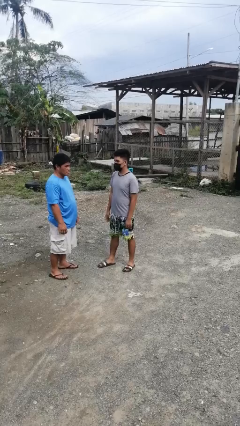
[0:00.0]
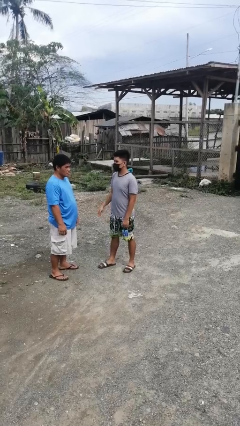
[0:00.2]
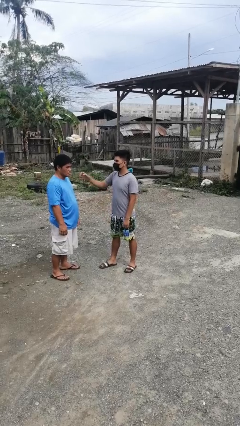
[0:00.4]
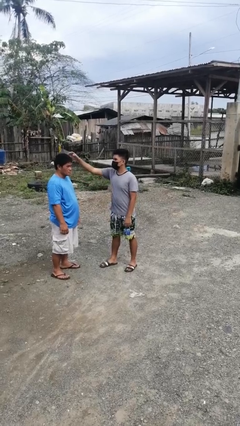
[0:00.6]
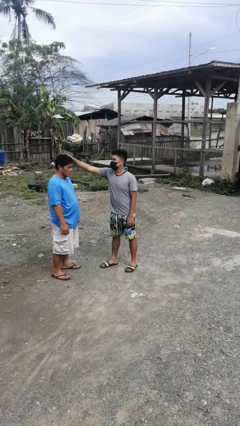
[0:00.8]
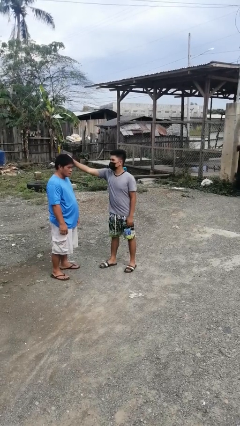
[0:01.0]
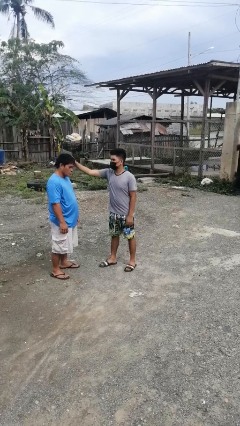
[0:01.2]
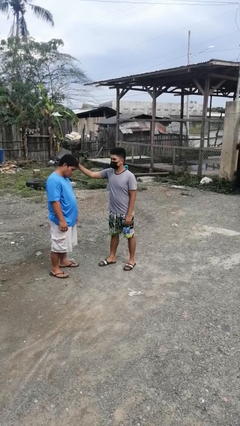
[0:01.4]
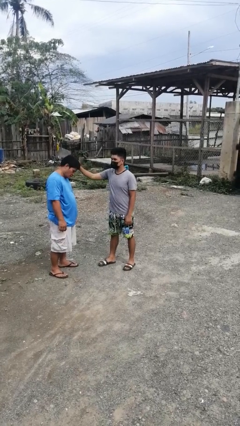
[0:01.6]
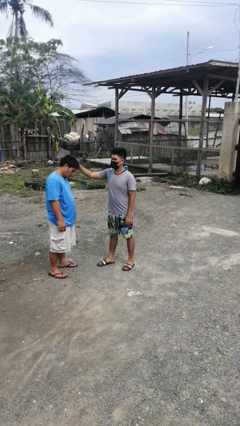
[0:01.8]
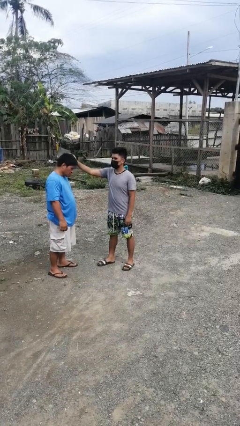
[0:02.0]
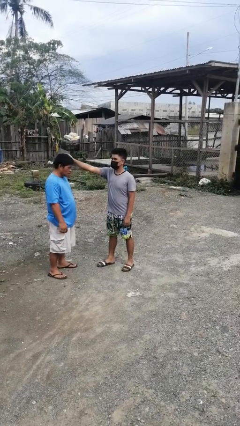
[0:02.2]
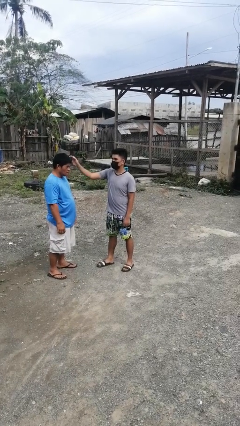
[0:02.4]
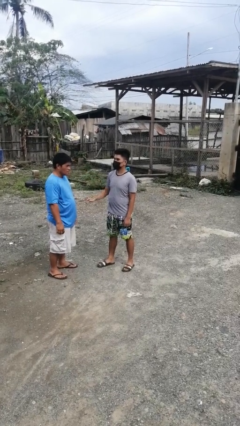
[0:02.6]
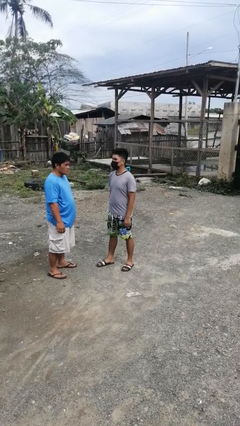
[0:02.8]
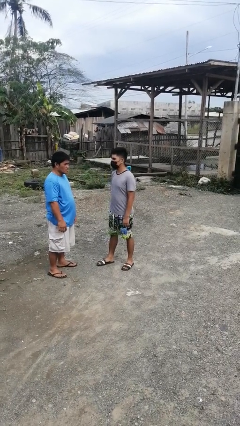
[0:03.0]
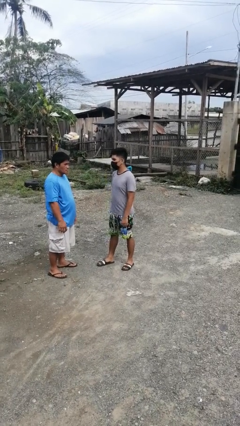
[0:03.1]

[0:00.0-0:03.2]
person grabs person by hair

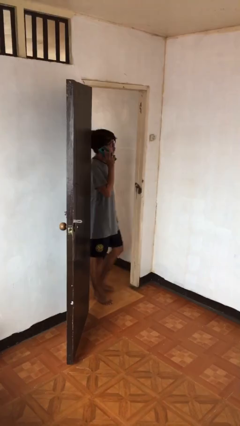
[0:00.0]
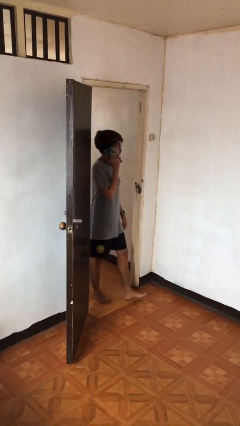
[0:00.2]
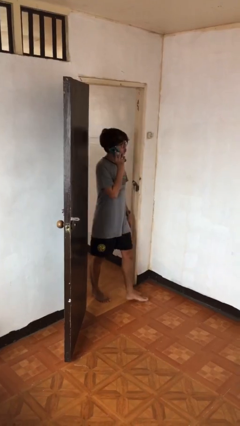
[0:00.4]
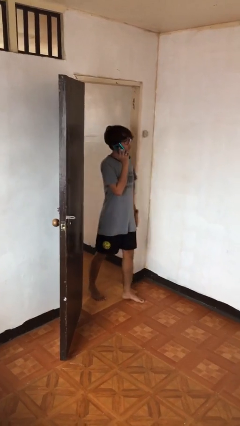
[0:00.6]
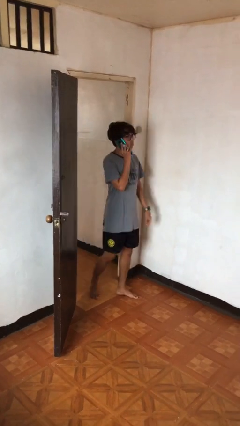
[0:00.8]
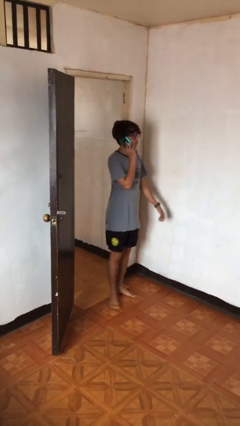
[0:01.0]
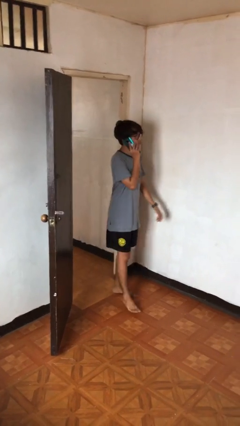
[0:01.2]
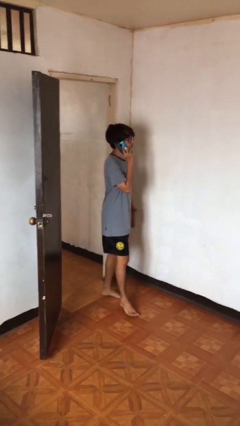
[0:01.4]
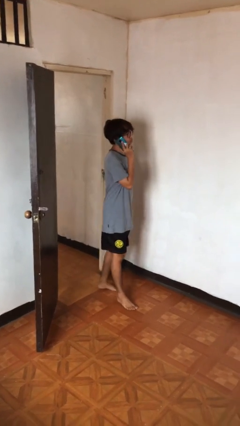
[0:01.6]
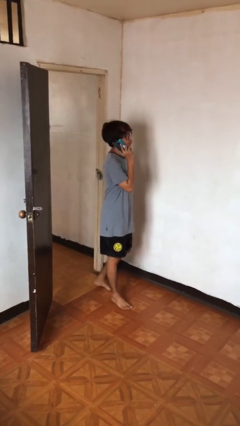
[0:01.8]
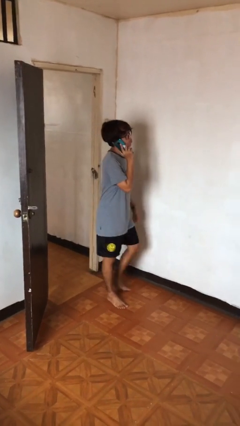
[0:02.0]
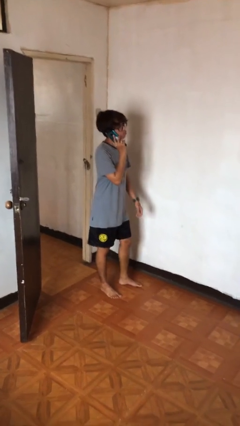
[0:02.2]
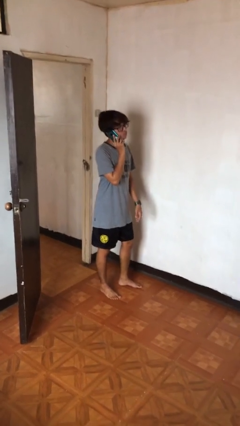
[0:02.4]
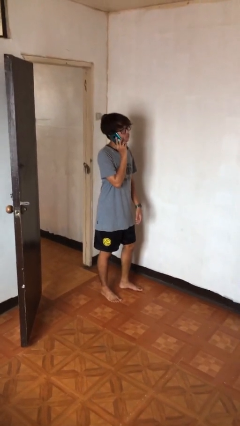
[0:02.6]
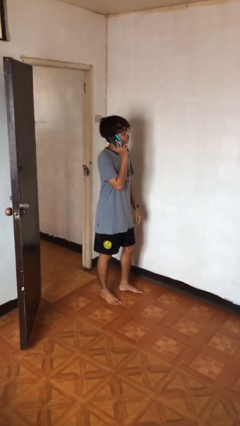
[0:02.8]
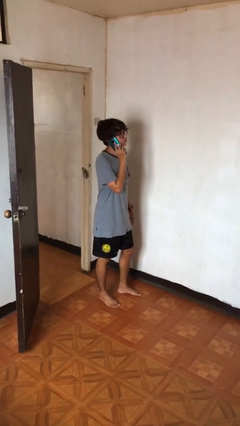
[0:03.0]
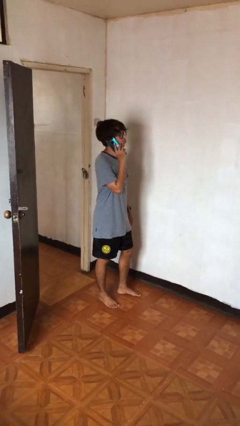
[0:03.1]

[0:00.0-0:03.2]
person enters scene through structure

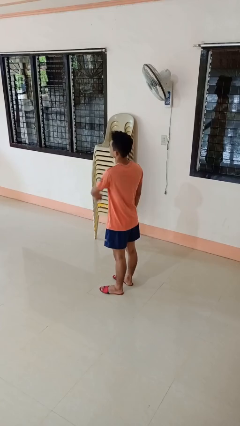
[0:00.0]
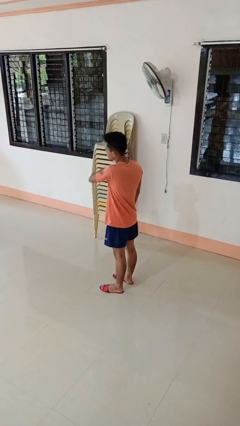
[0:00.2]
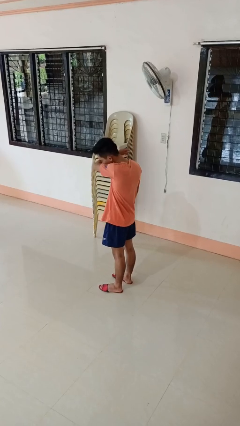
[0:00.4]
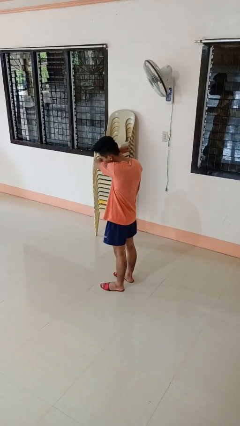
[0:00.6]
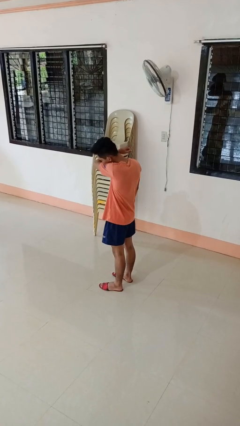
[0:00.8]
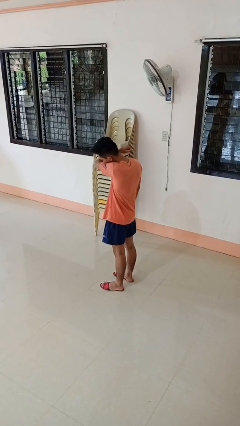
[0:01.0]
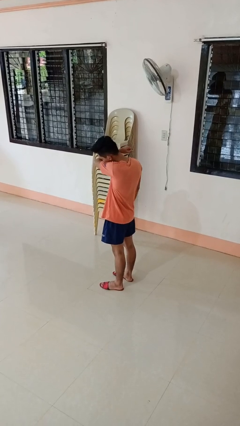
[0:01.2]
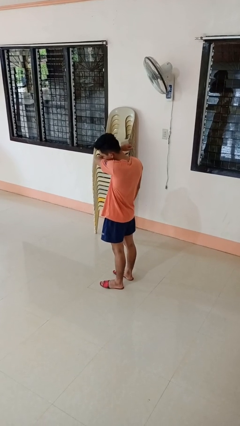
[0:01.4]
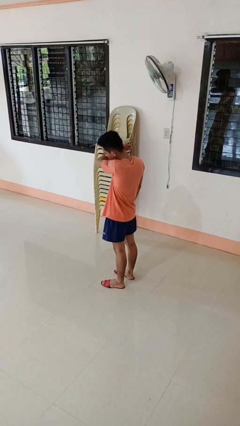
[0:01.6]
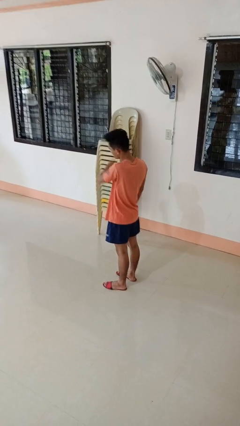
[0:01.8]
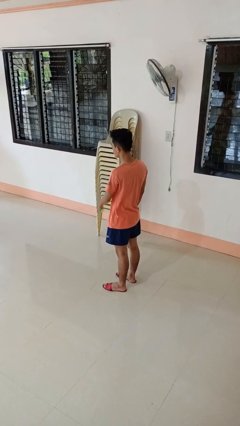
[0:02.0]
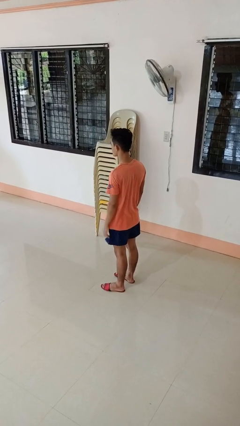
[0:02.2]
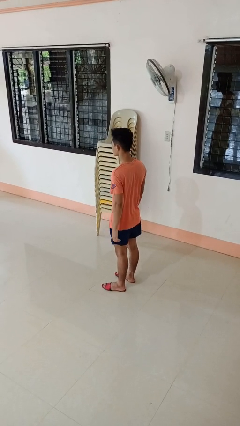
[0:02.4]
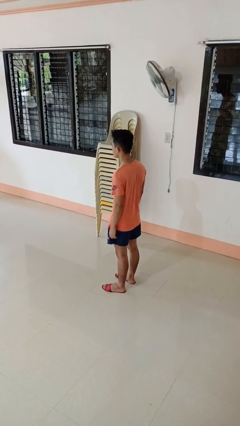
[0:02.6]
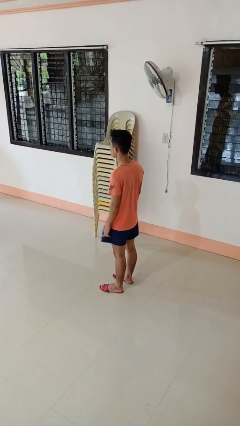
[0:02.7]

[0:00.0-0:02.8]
person sneezes into arm

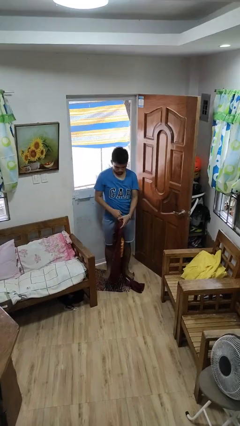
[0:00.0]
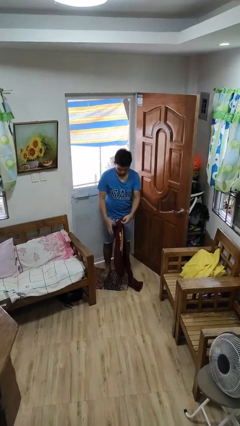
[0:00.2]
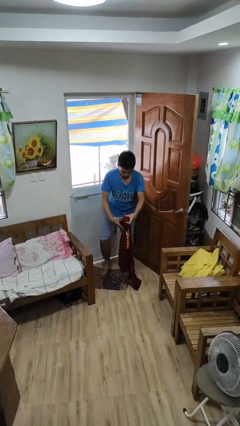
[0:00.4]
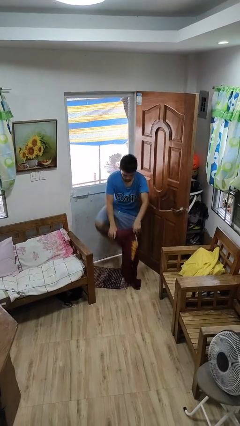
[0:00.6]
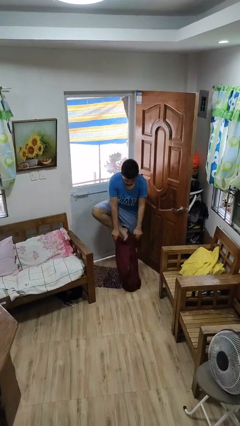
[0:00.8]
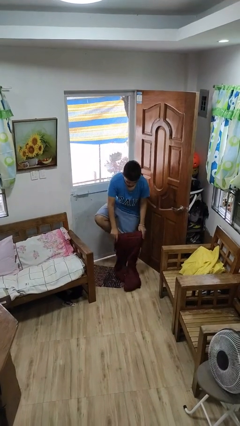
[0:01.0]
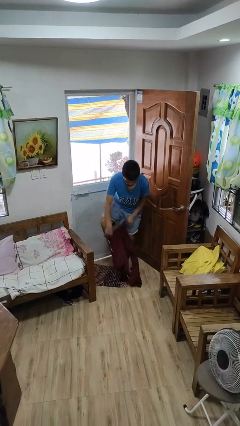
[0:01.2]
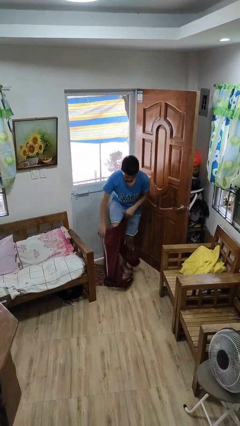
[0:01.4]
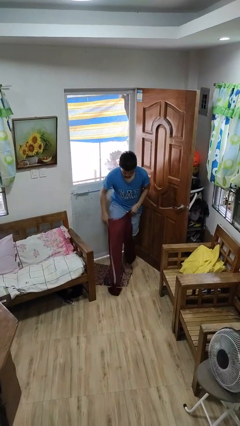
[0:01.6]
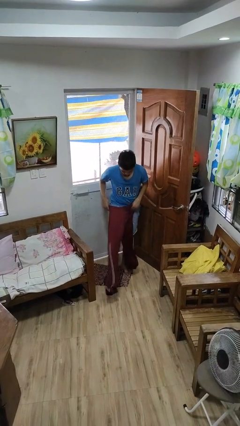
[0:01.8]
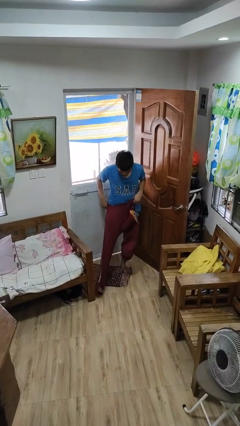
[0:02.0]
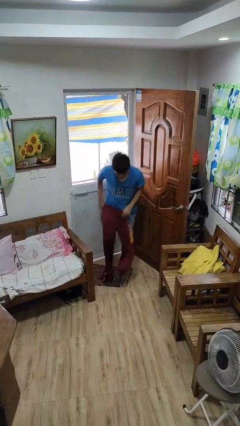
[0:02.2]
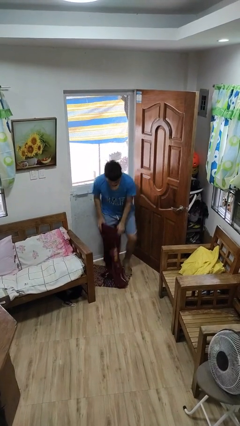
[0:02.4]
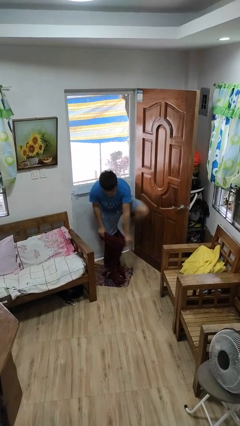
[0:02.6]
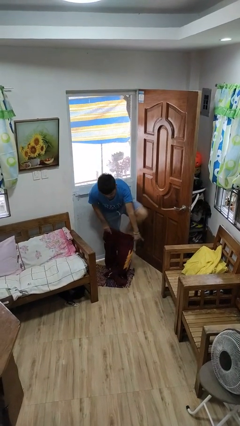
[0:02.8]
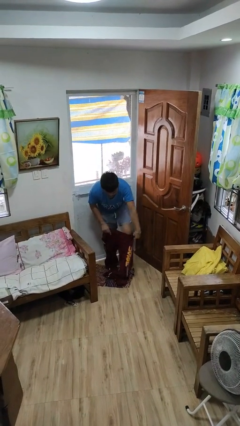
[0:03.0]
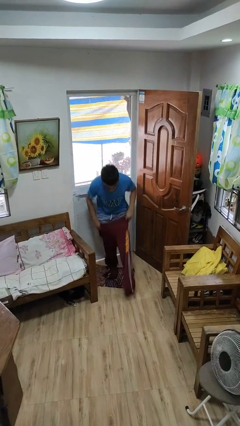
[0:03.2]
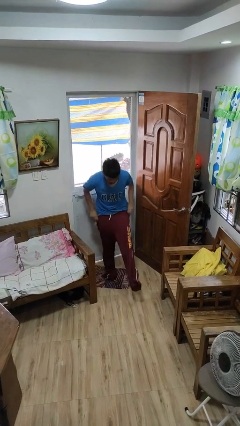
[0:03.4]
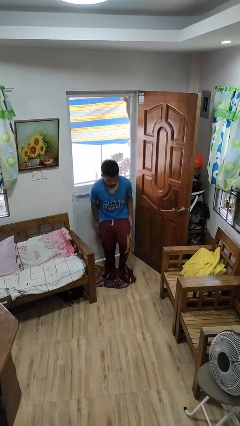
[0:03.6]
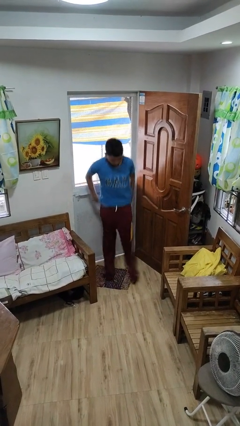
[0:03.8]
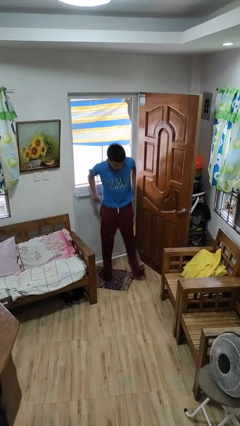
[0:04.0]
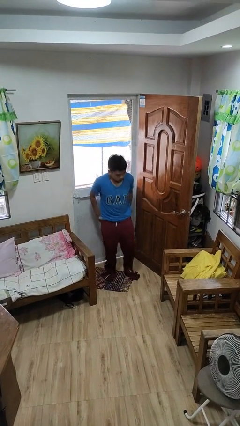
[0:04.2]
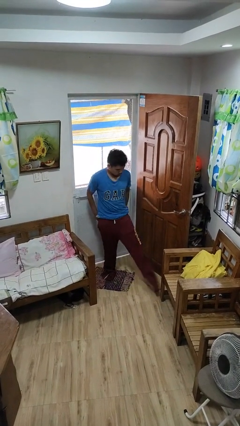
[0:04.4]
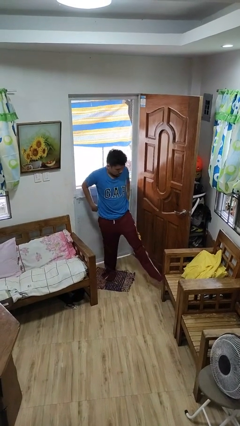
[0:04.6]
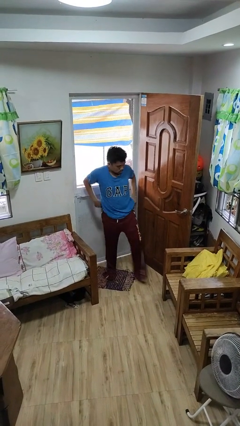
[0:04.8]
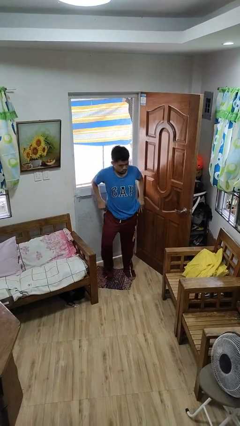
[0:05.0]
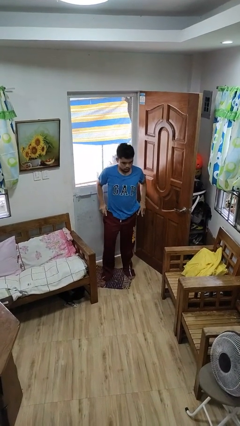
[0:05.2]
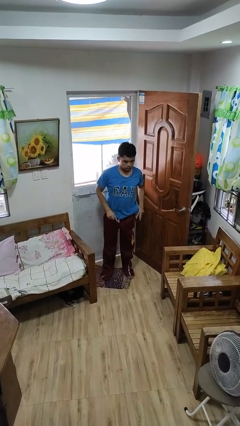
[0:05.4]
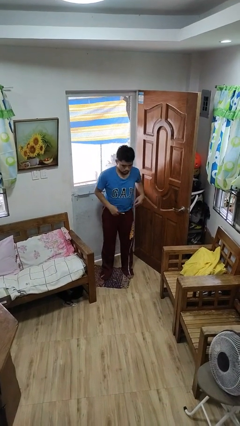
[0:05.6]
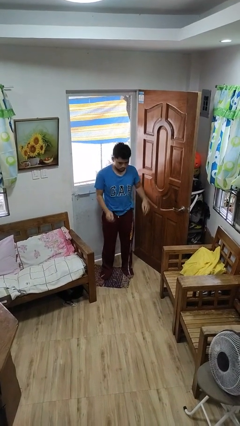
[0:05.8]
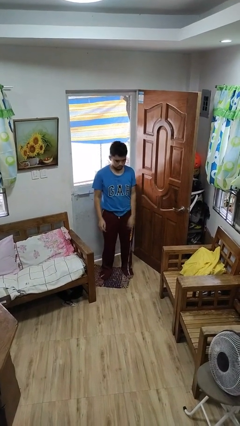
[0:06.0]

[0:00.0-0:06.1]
person puts on pants

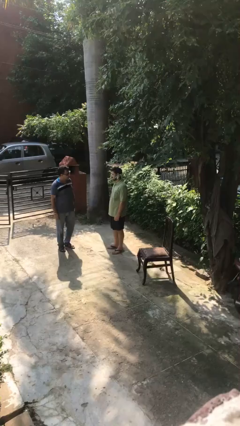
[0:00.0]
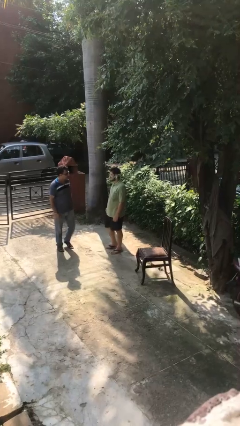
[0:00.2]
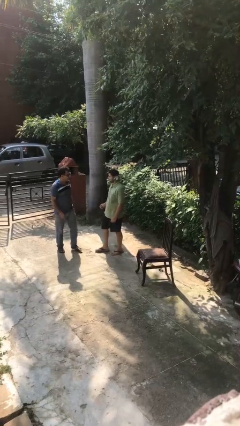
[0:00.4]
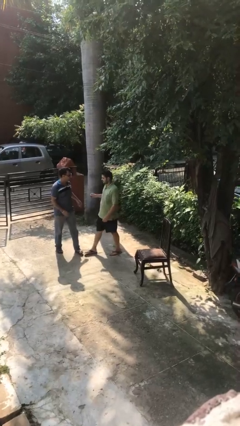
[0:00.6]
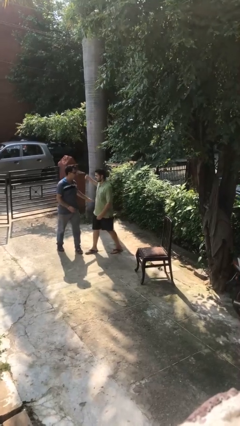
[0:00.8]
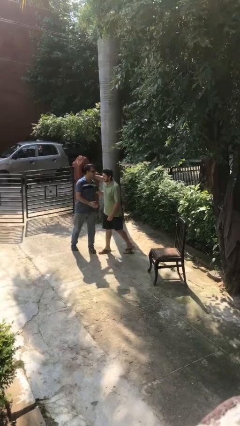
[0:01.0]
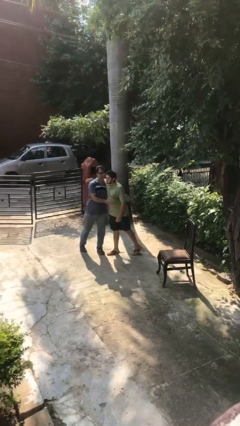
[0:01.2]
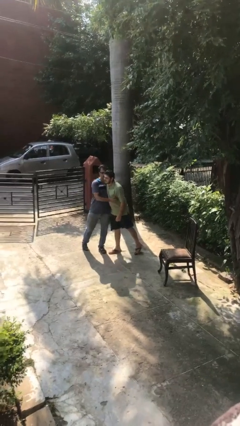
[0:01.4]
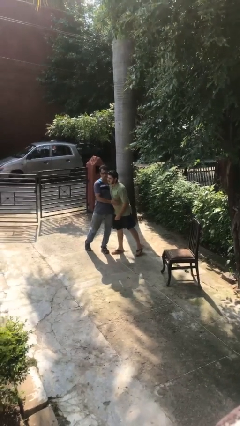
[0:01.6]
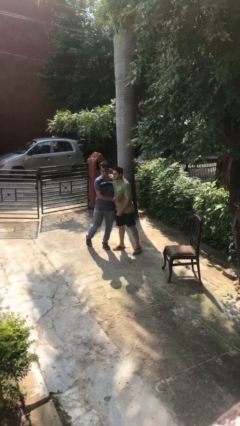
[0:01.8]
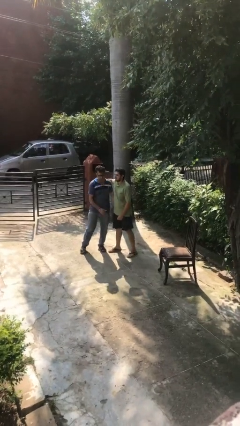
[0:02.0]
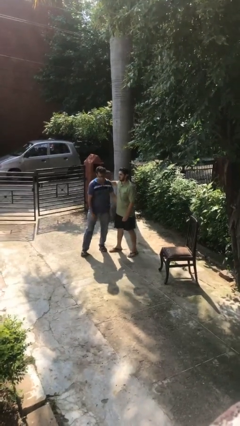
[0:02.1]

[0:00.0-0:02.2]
person embraces person

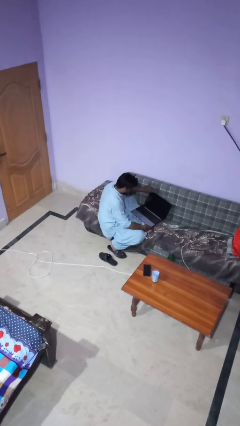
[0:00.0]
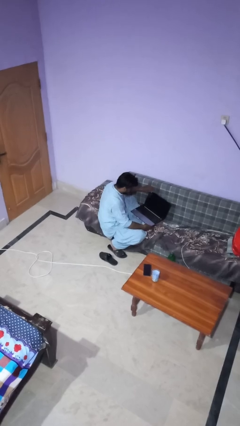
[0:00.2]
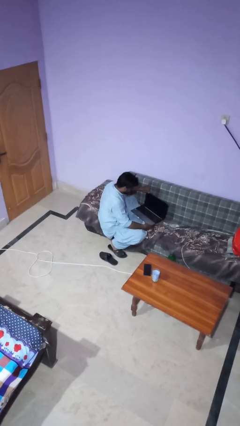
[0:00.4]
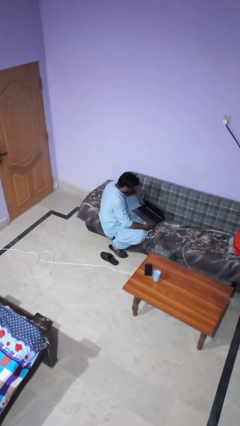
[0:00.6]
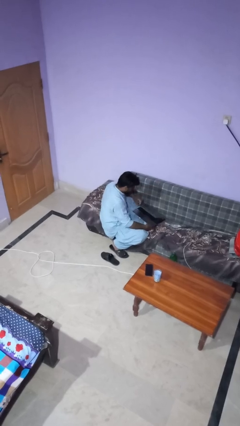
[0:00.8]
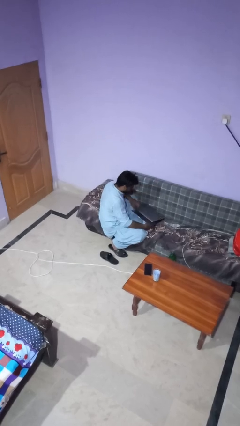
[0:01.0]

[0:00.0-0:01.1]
person closes laptop
